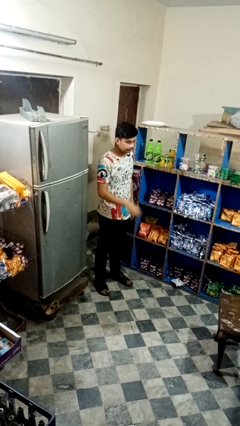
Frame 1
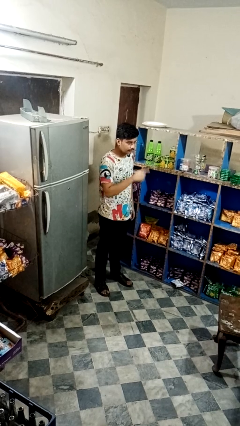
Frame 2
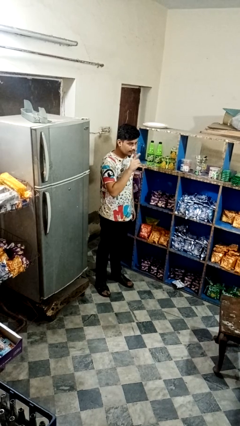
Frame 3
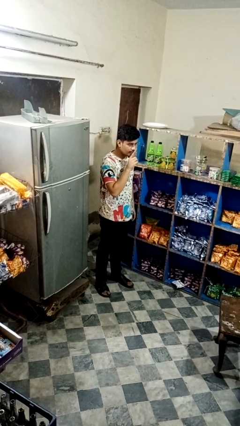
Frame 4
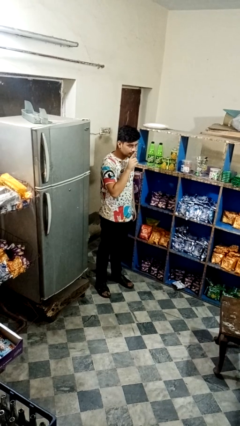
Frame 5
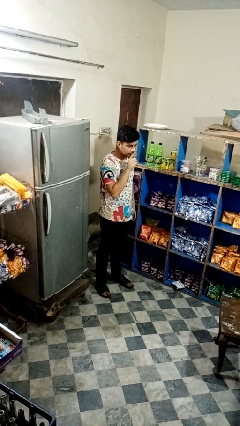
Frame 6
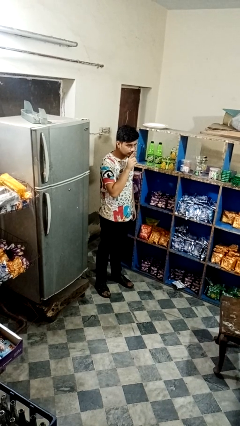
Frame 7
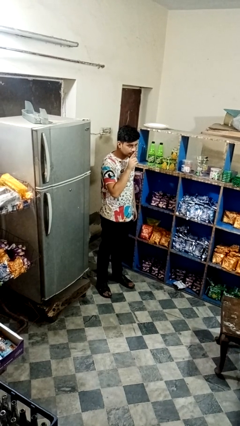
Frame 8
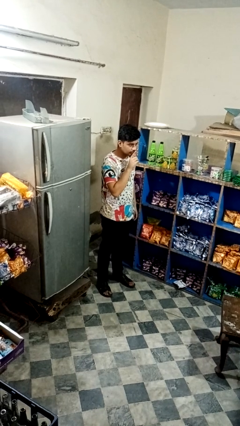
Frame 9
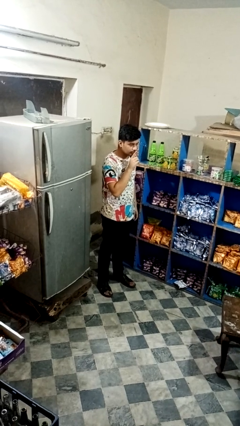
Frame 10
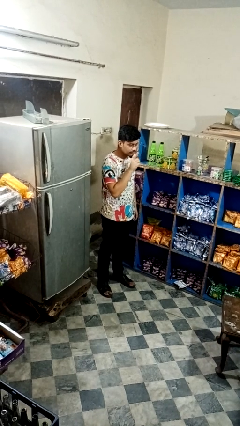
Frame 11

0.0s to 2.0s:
person gestures be quiet

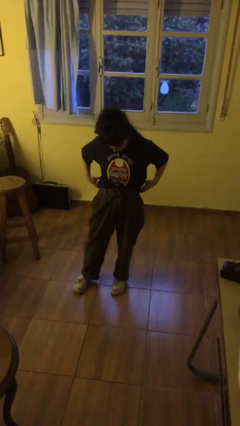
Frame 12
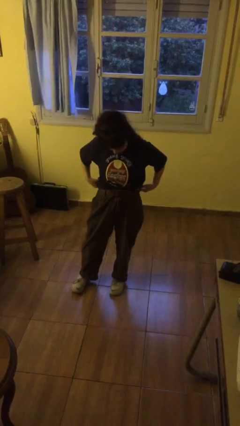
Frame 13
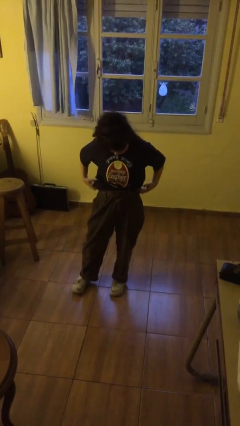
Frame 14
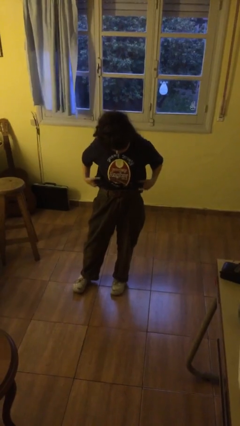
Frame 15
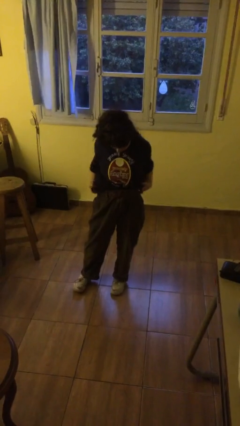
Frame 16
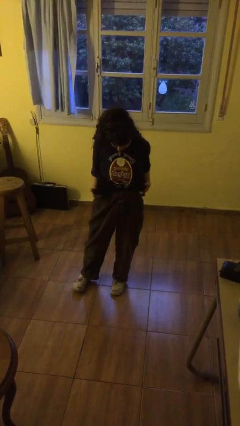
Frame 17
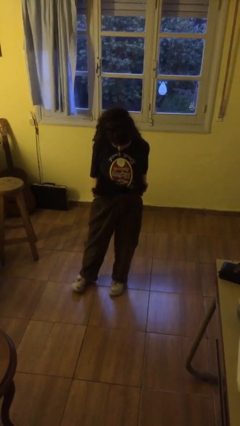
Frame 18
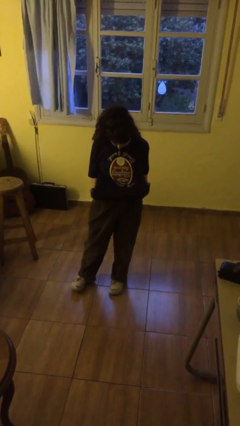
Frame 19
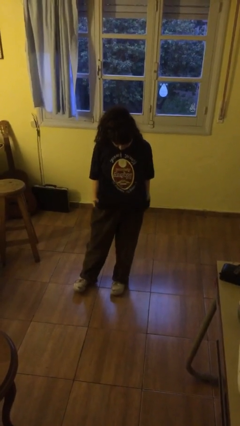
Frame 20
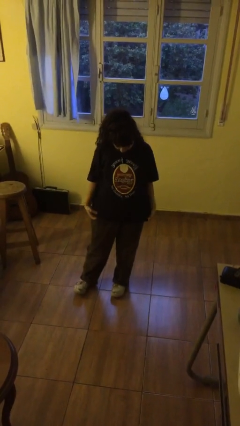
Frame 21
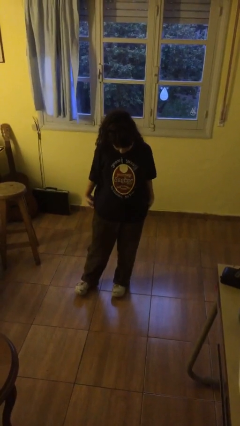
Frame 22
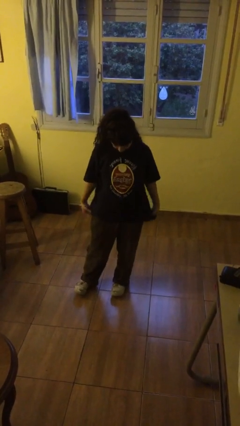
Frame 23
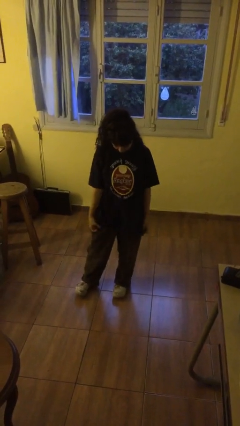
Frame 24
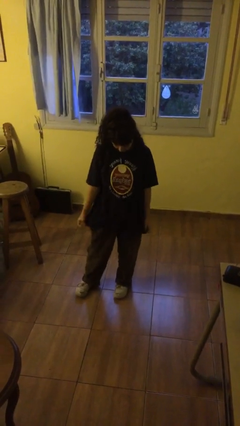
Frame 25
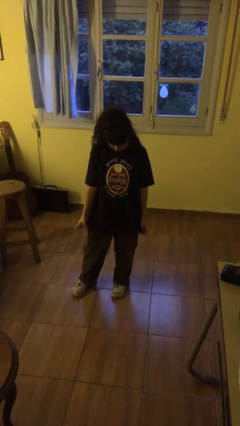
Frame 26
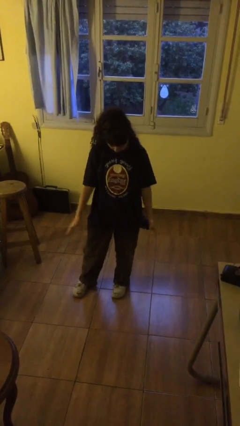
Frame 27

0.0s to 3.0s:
person untucks shirt

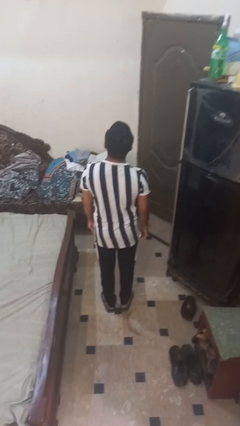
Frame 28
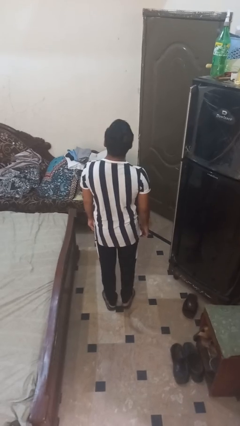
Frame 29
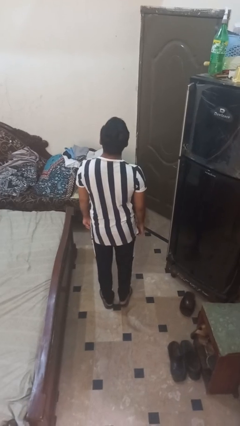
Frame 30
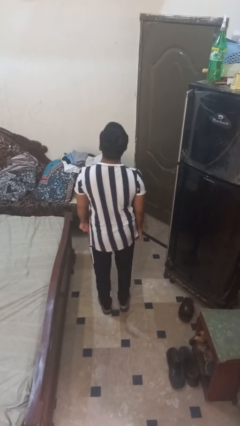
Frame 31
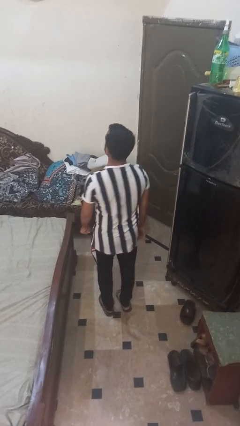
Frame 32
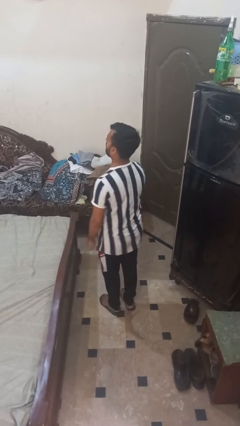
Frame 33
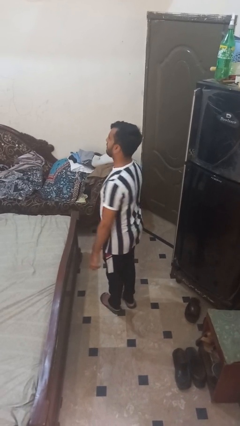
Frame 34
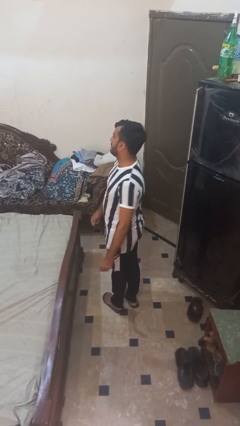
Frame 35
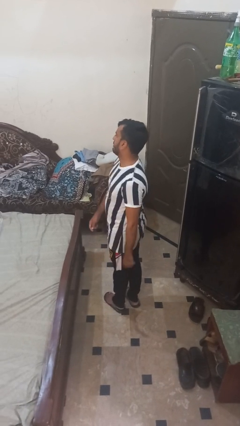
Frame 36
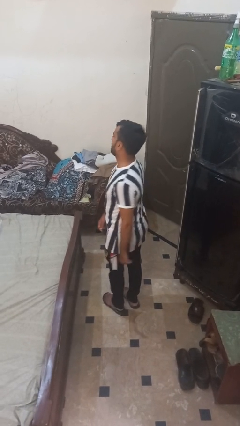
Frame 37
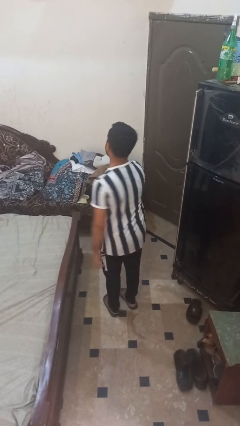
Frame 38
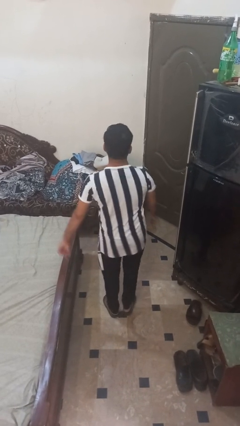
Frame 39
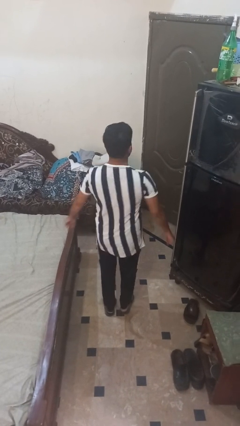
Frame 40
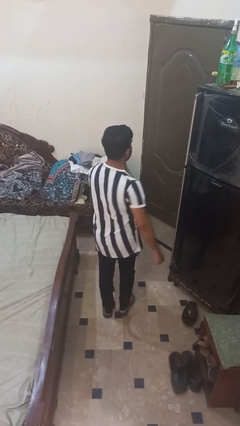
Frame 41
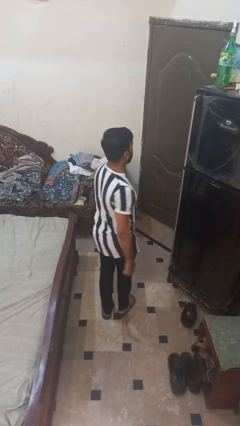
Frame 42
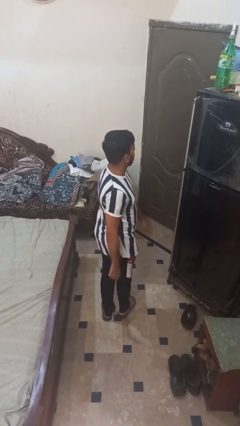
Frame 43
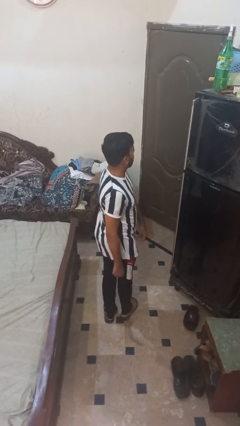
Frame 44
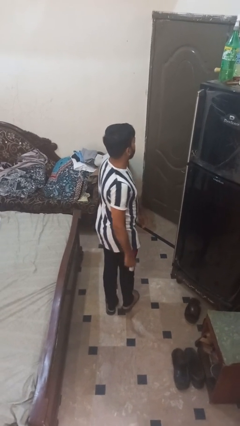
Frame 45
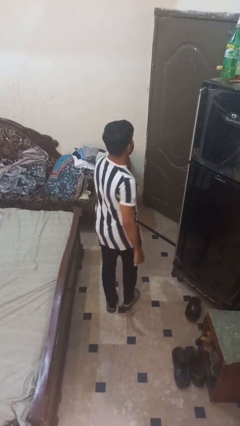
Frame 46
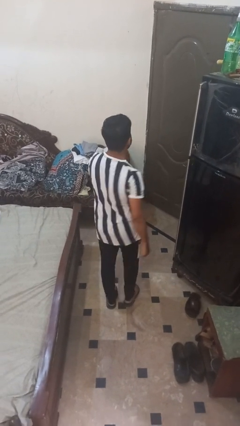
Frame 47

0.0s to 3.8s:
person twirls

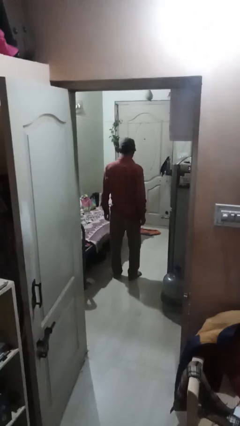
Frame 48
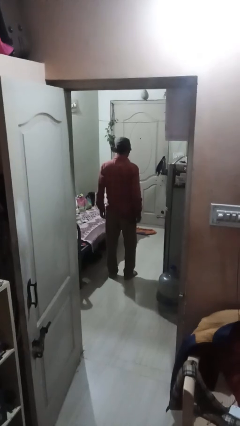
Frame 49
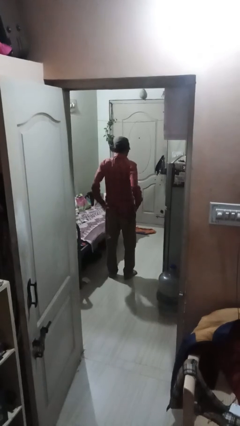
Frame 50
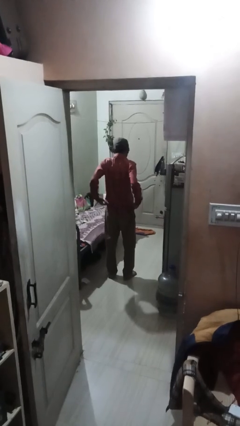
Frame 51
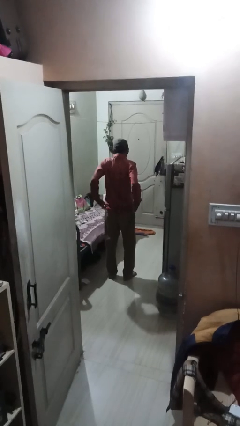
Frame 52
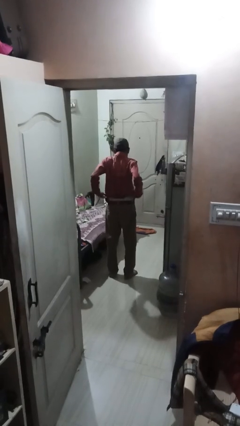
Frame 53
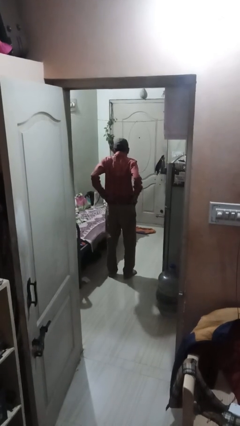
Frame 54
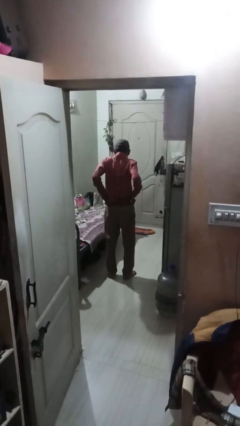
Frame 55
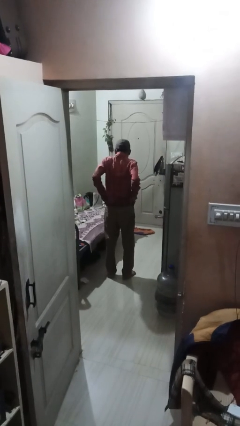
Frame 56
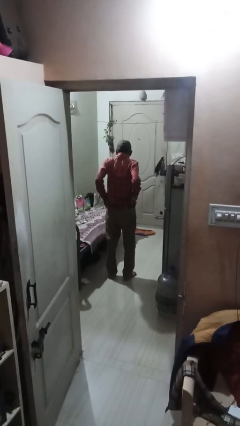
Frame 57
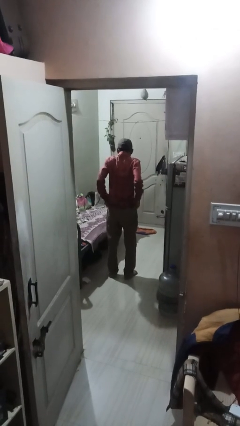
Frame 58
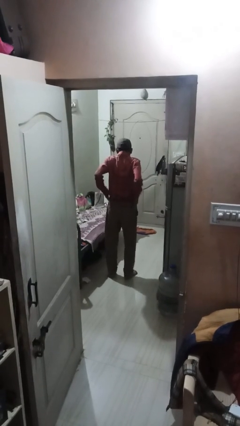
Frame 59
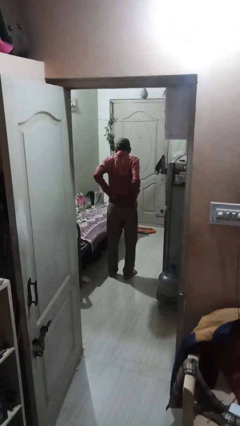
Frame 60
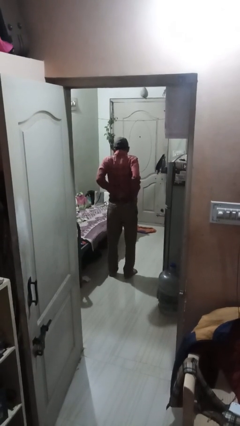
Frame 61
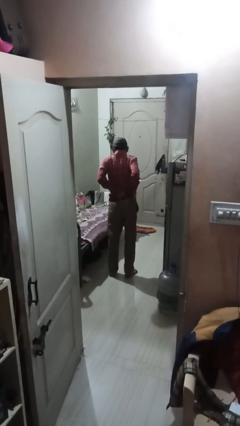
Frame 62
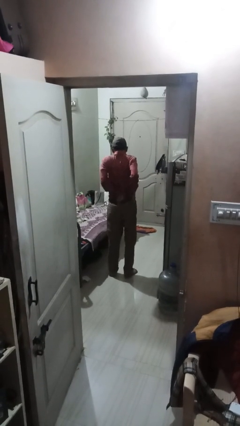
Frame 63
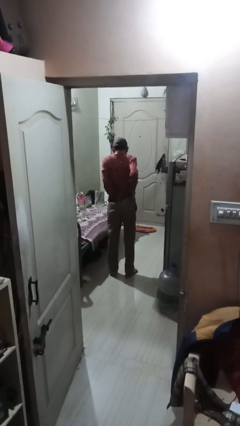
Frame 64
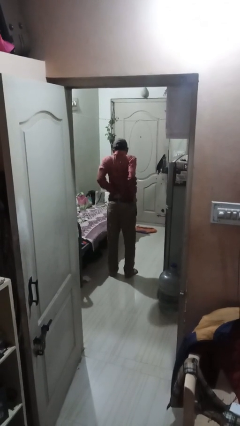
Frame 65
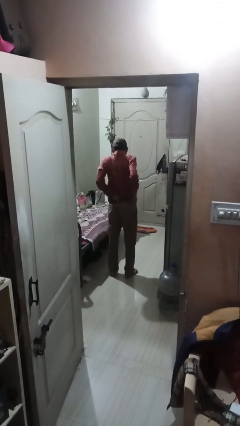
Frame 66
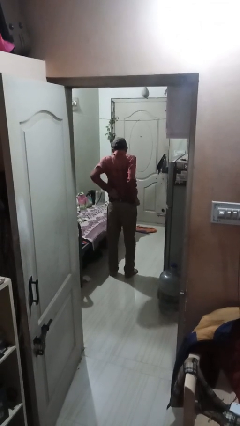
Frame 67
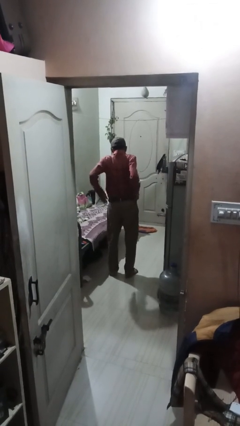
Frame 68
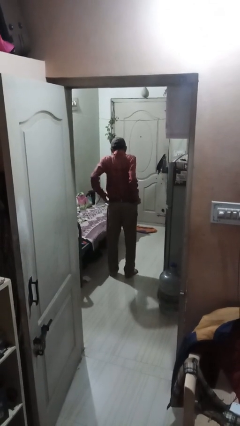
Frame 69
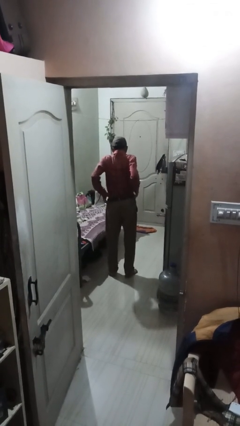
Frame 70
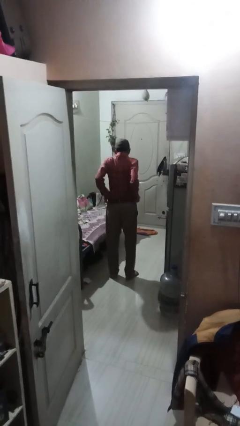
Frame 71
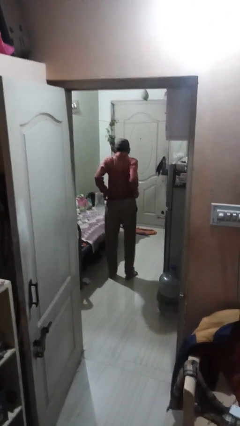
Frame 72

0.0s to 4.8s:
person tucks in shirt

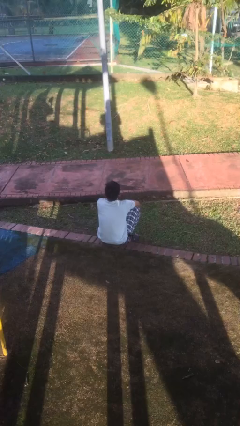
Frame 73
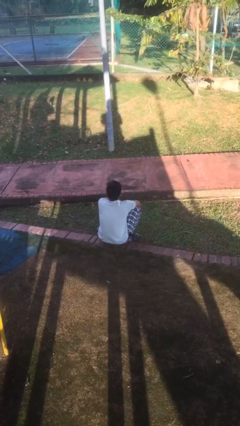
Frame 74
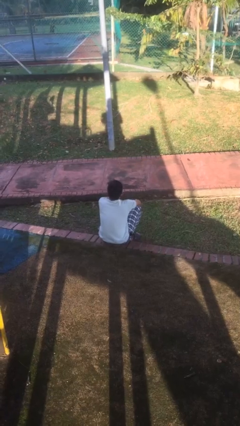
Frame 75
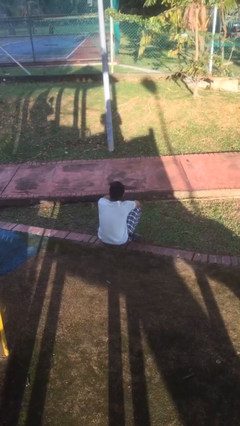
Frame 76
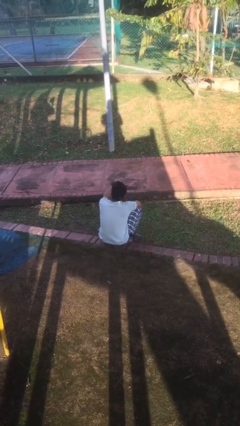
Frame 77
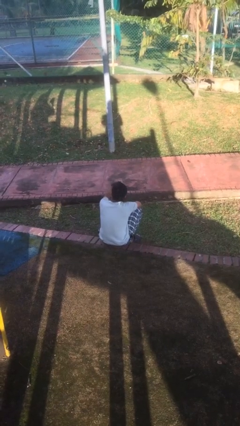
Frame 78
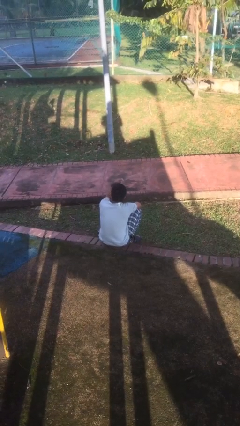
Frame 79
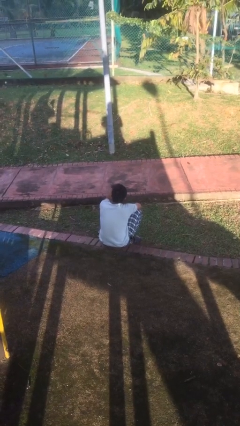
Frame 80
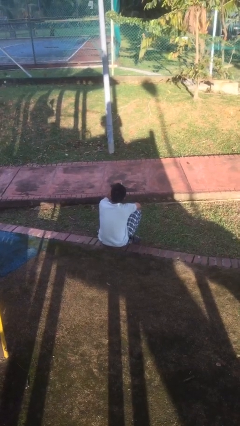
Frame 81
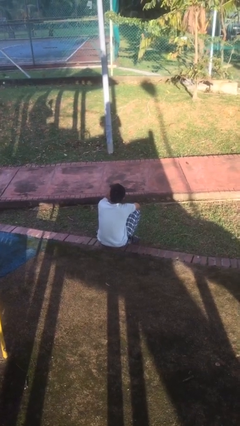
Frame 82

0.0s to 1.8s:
person gestures watch closely

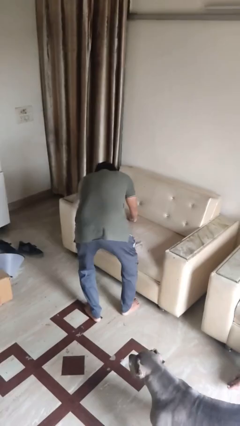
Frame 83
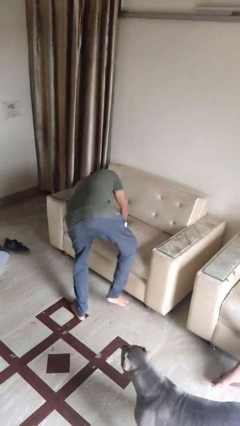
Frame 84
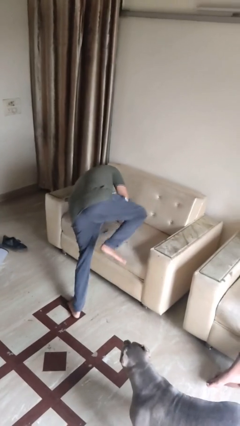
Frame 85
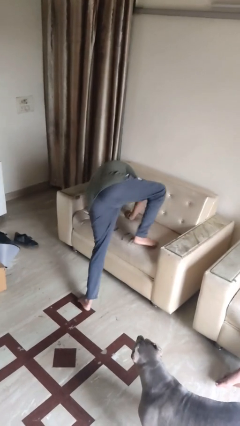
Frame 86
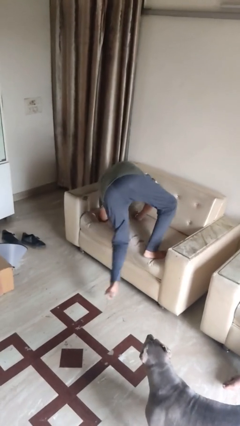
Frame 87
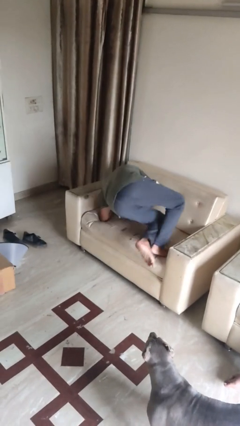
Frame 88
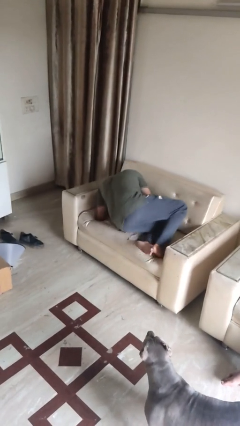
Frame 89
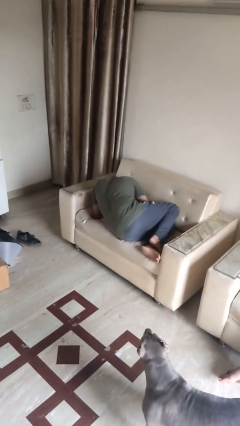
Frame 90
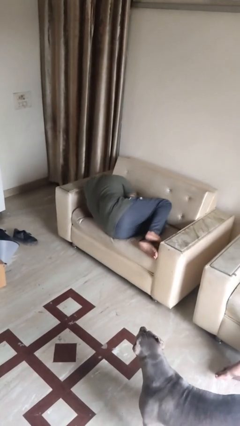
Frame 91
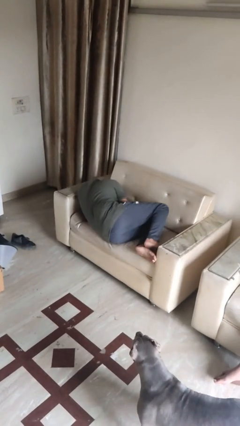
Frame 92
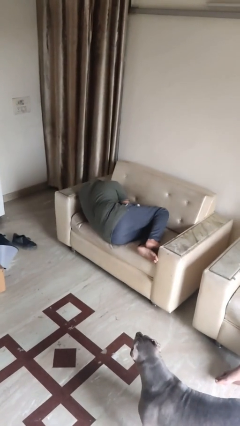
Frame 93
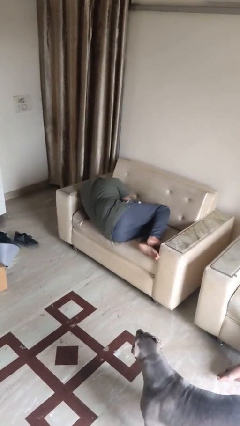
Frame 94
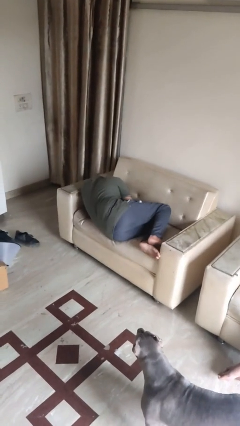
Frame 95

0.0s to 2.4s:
person lies down on bed
